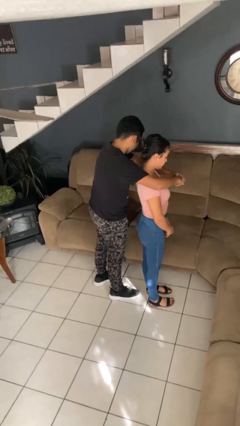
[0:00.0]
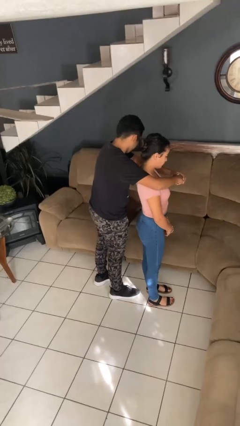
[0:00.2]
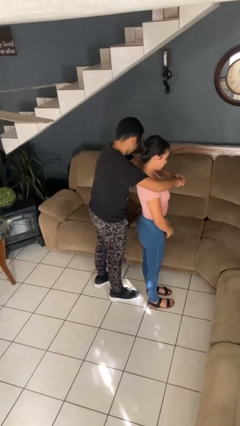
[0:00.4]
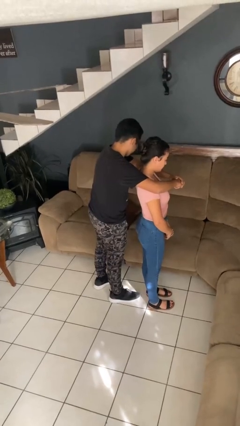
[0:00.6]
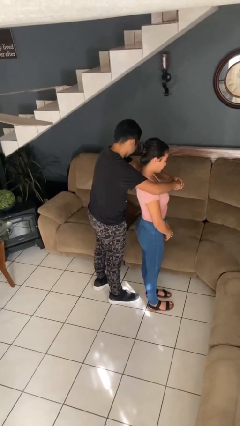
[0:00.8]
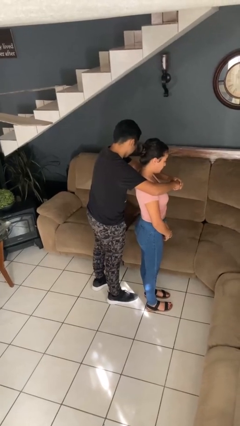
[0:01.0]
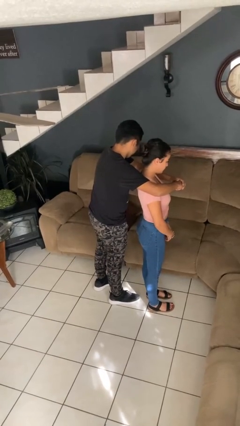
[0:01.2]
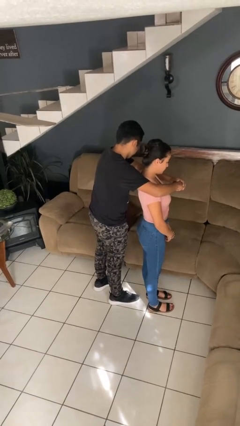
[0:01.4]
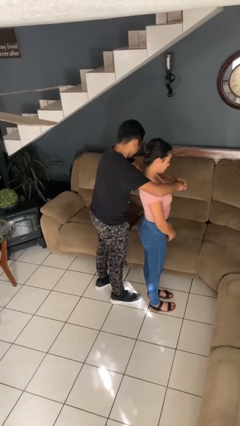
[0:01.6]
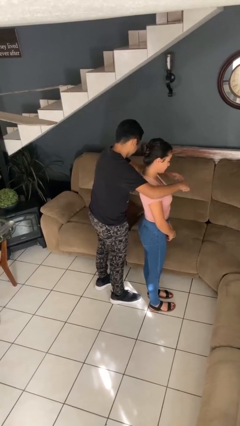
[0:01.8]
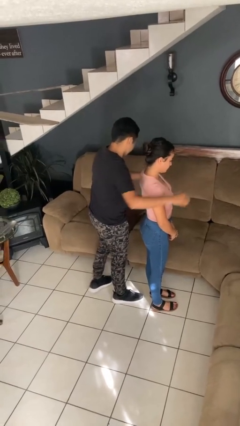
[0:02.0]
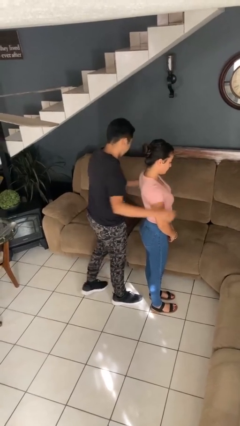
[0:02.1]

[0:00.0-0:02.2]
person hugs person from behind

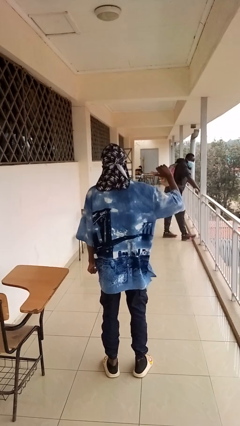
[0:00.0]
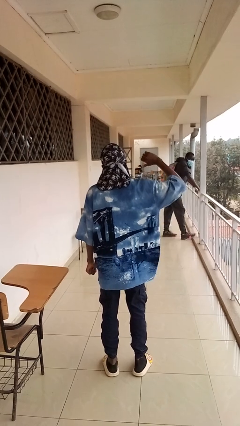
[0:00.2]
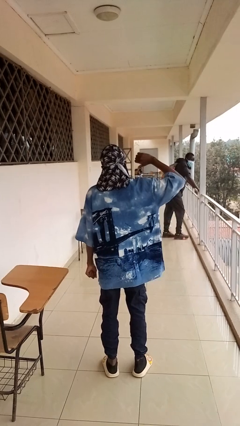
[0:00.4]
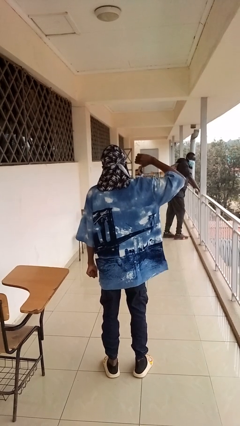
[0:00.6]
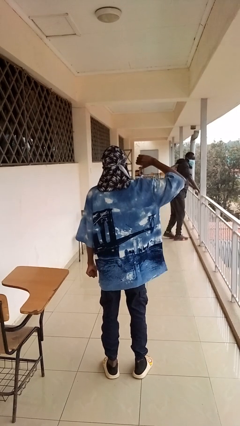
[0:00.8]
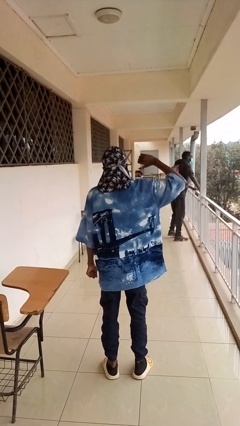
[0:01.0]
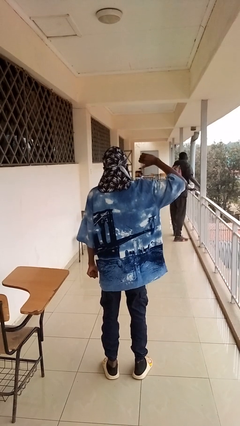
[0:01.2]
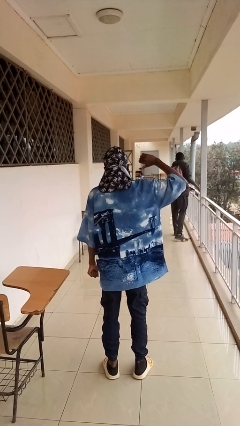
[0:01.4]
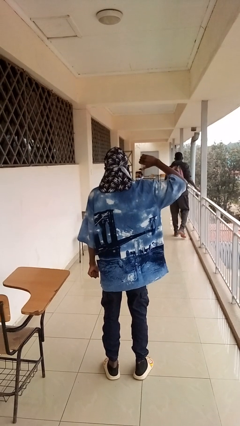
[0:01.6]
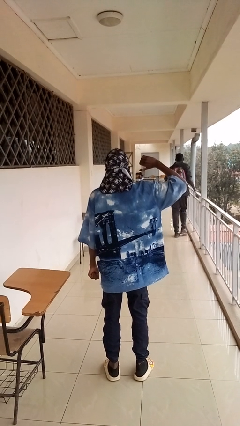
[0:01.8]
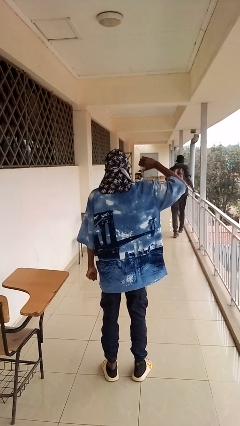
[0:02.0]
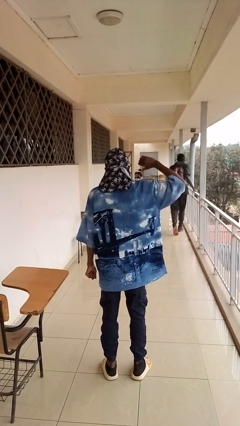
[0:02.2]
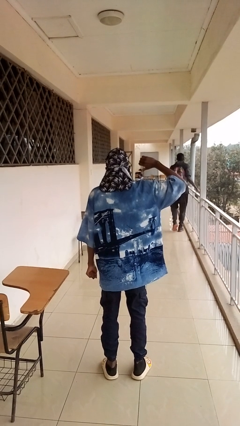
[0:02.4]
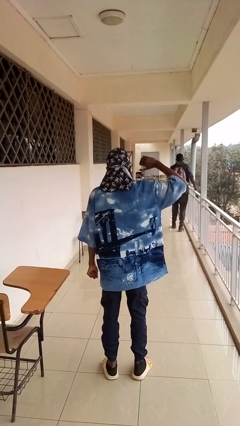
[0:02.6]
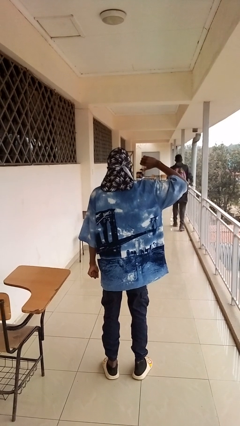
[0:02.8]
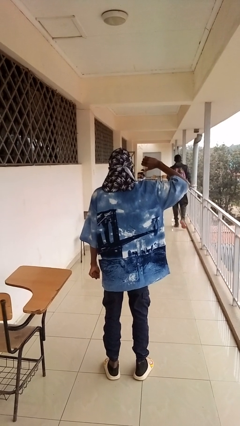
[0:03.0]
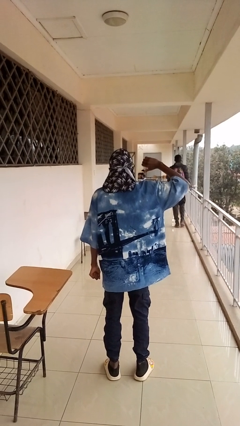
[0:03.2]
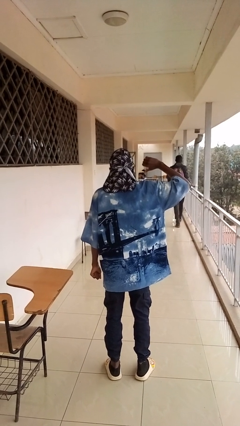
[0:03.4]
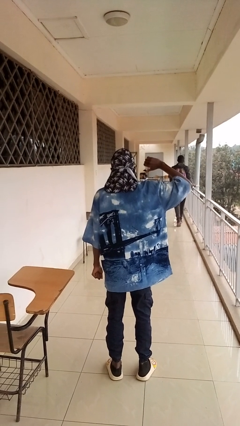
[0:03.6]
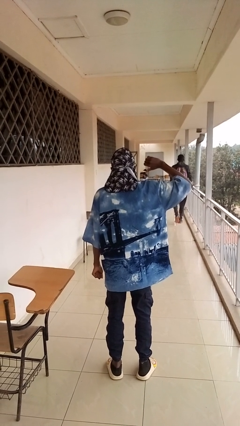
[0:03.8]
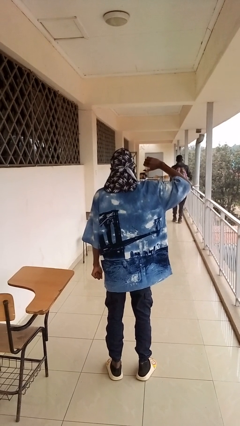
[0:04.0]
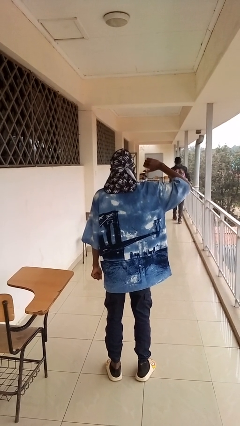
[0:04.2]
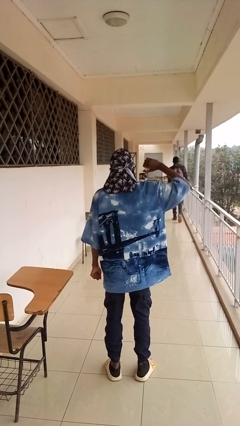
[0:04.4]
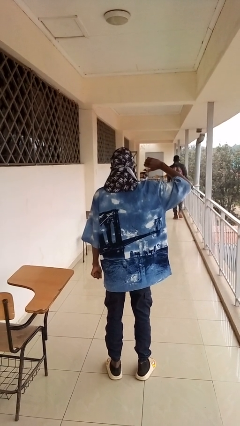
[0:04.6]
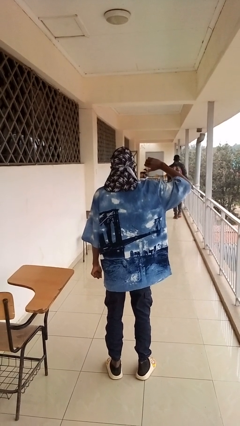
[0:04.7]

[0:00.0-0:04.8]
person gestures thumbs down

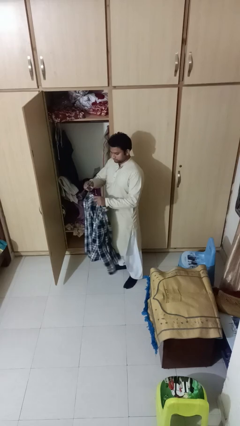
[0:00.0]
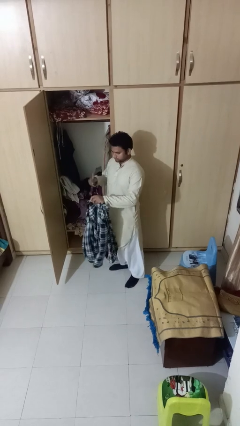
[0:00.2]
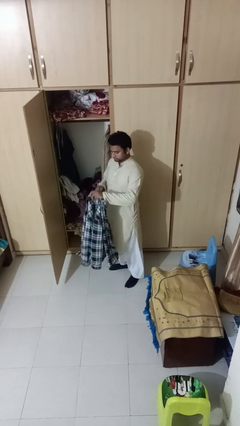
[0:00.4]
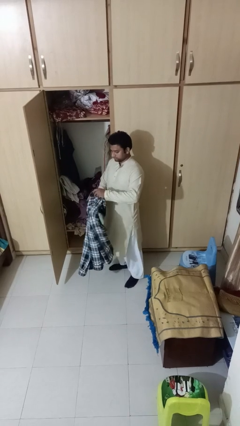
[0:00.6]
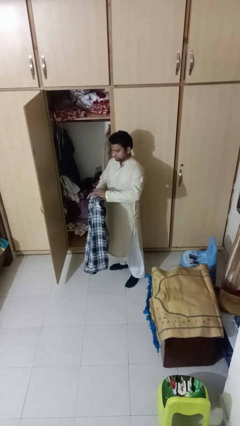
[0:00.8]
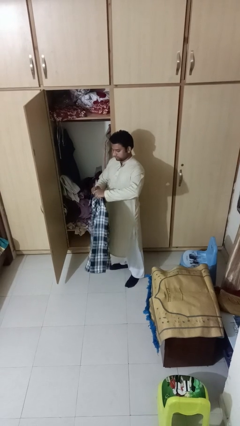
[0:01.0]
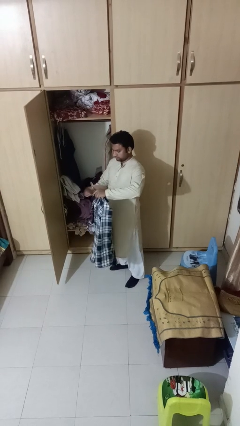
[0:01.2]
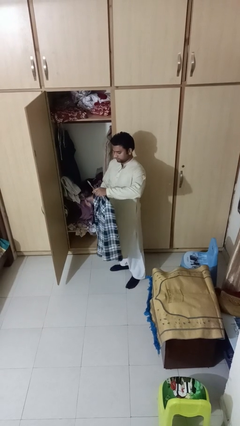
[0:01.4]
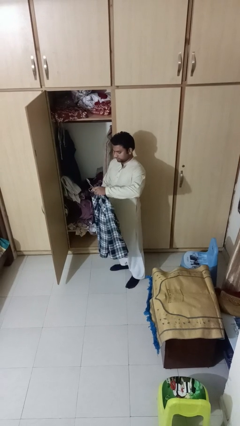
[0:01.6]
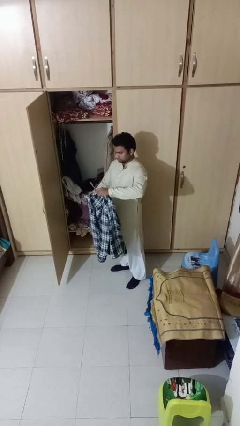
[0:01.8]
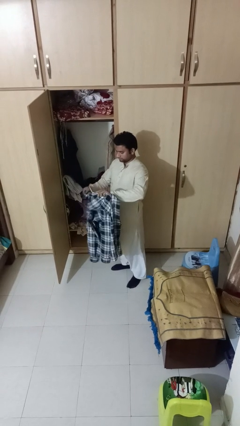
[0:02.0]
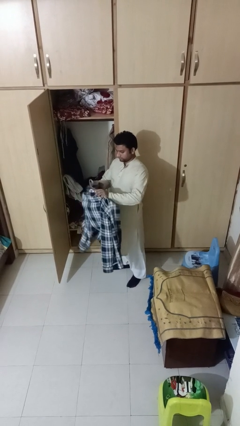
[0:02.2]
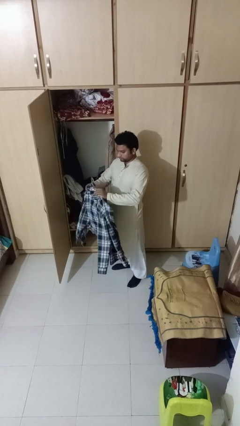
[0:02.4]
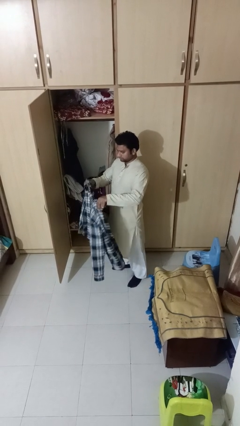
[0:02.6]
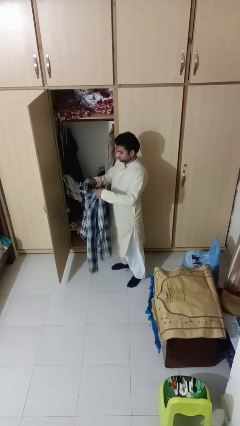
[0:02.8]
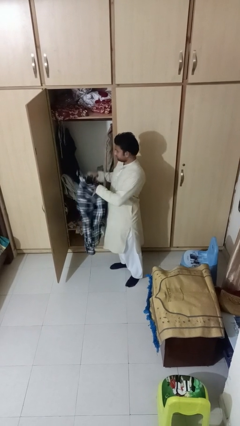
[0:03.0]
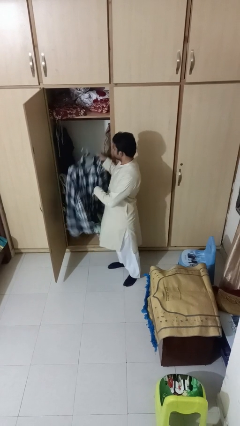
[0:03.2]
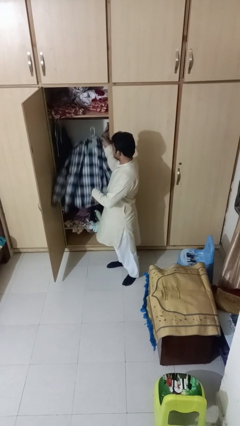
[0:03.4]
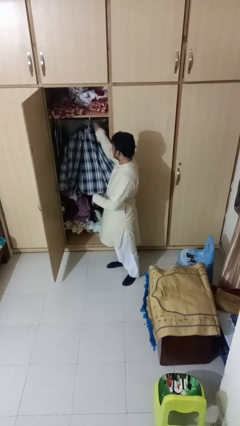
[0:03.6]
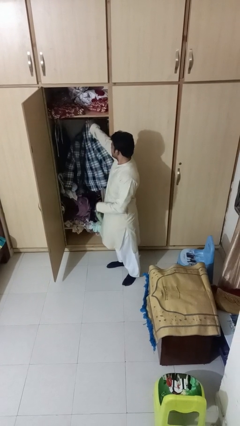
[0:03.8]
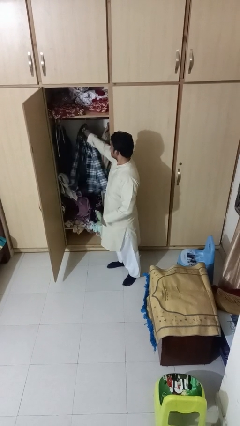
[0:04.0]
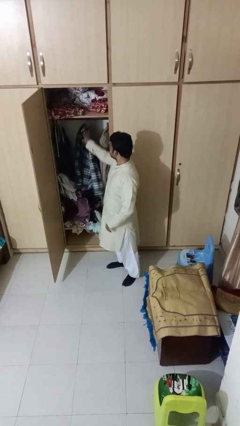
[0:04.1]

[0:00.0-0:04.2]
person puts clothes into closet

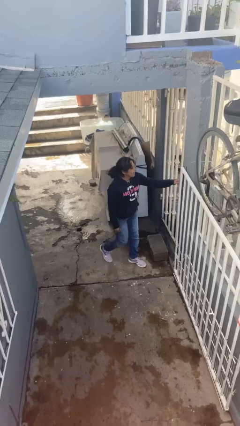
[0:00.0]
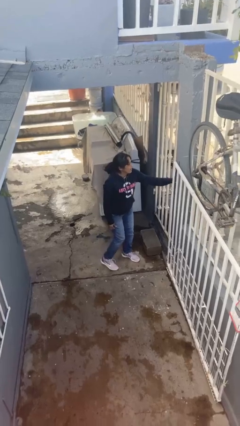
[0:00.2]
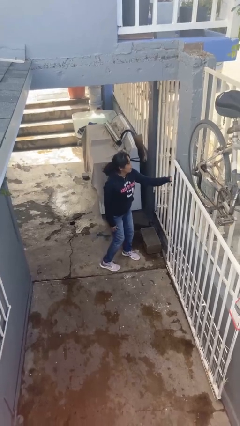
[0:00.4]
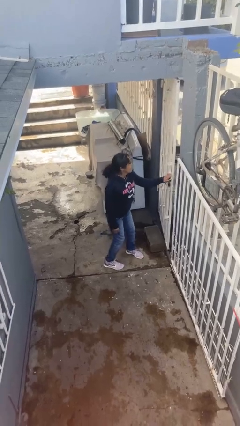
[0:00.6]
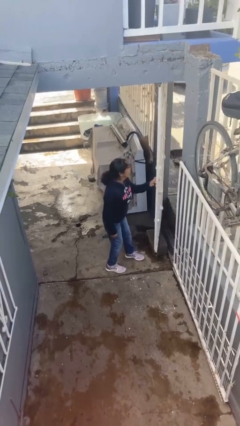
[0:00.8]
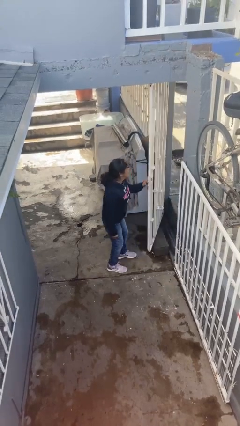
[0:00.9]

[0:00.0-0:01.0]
person opens facility door

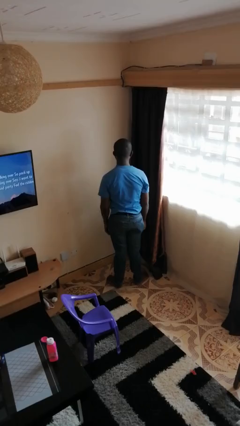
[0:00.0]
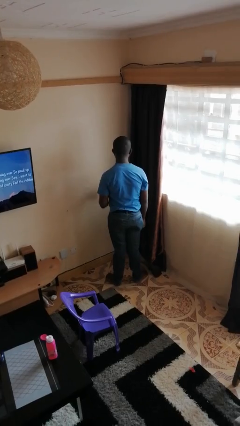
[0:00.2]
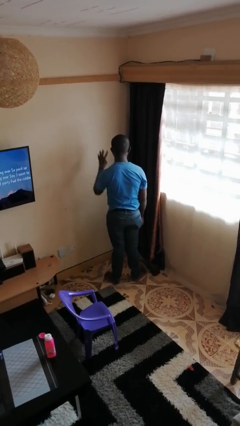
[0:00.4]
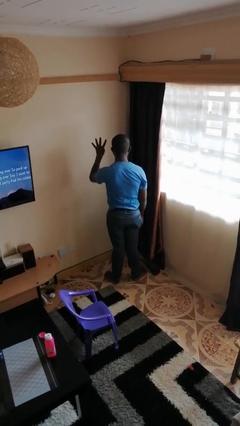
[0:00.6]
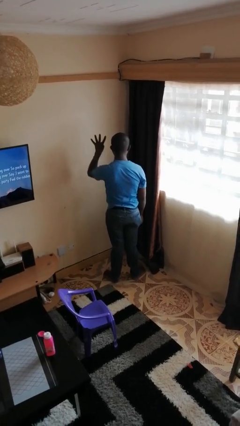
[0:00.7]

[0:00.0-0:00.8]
person gestures number four

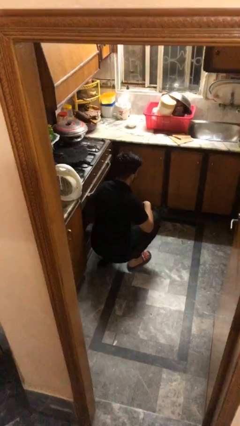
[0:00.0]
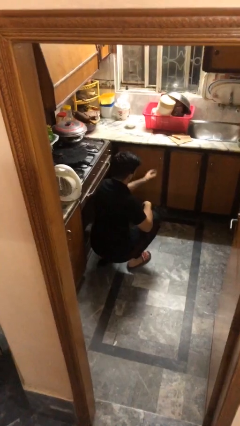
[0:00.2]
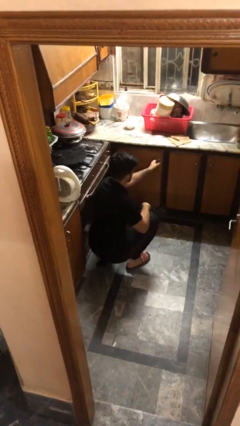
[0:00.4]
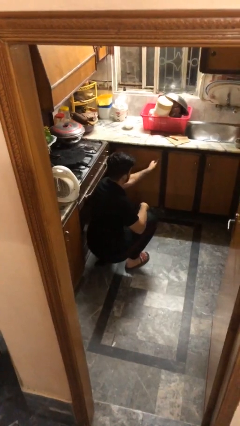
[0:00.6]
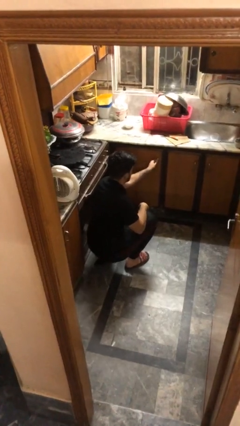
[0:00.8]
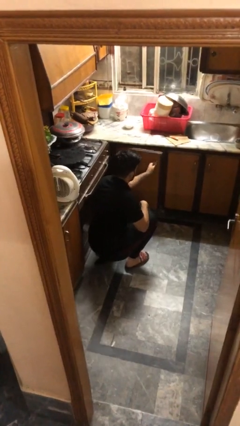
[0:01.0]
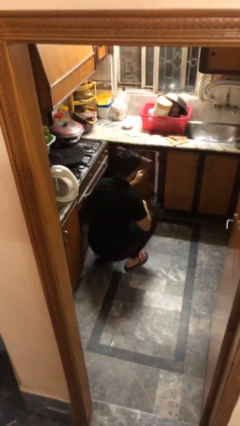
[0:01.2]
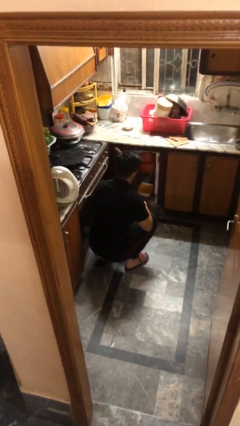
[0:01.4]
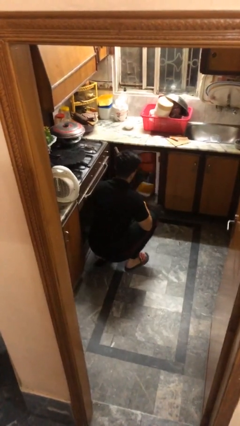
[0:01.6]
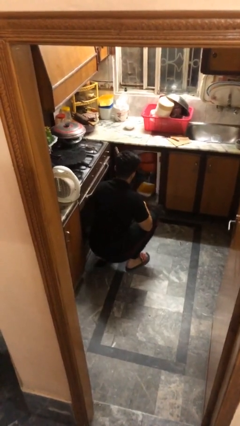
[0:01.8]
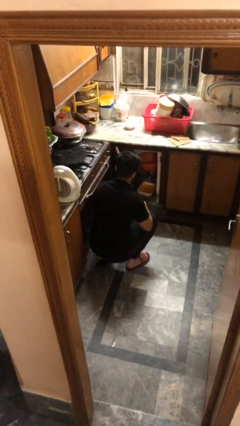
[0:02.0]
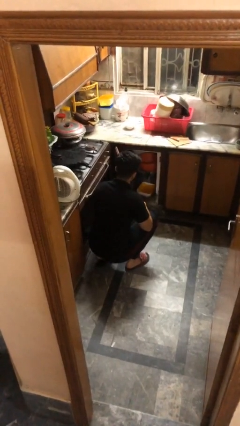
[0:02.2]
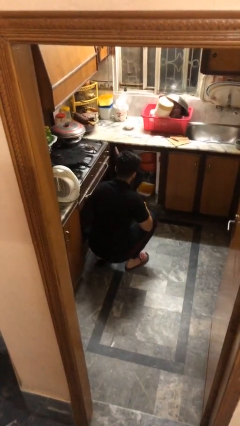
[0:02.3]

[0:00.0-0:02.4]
person opens kitchen drawer

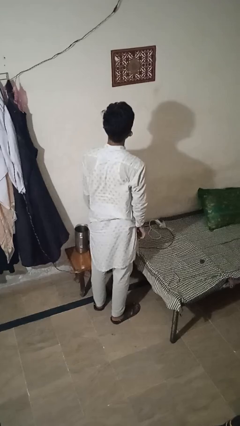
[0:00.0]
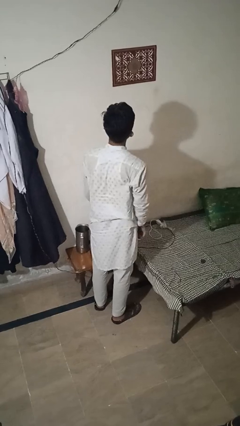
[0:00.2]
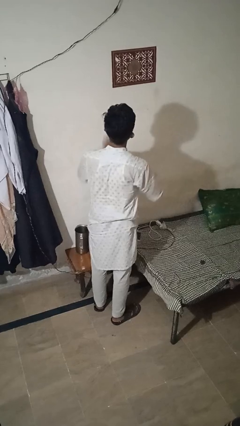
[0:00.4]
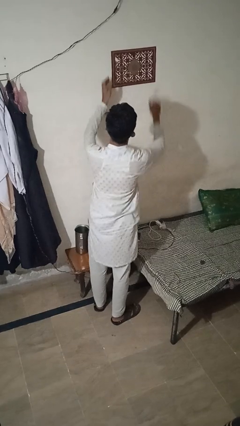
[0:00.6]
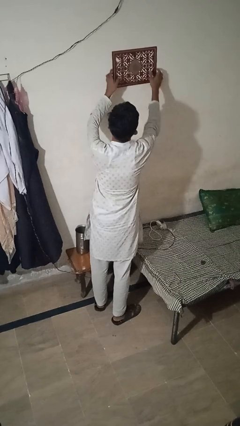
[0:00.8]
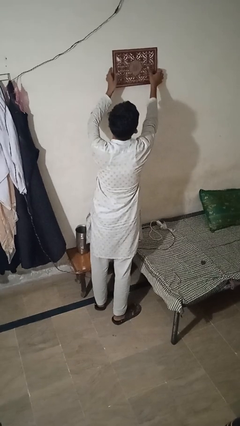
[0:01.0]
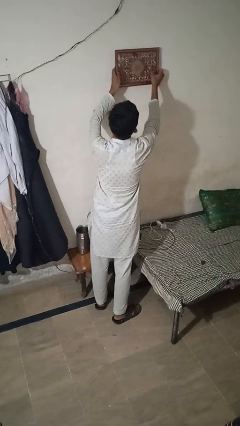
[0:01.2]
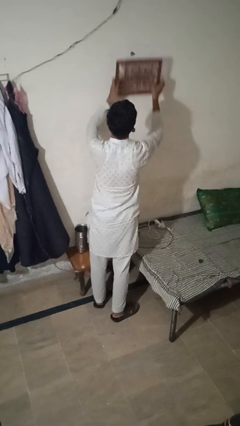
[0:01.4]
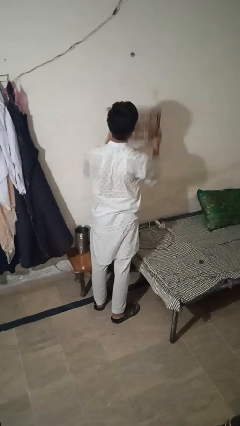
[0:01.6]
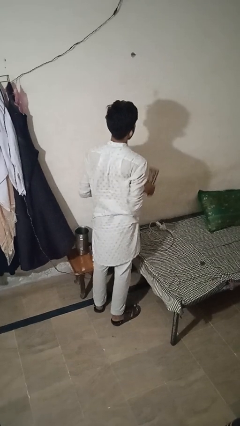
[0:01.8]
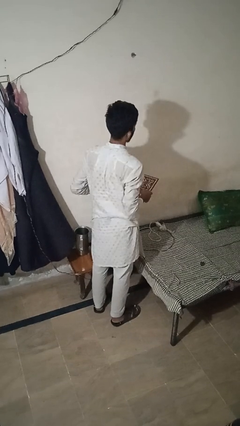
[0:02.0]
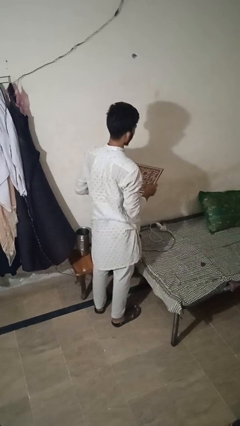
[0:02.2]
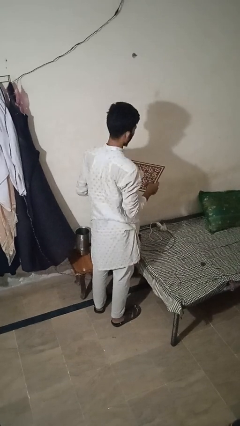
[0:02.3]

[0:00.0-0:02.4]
person takes down picture frame
